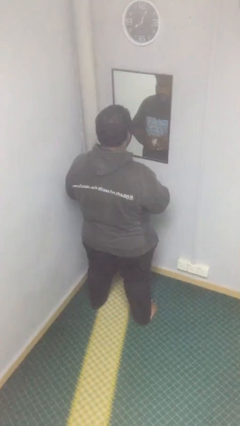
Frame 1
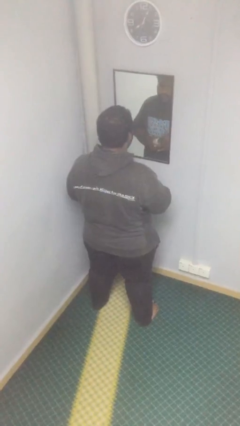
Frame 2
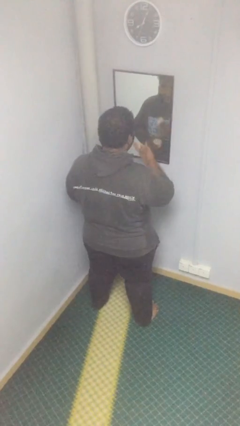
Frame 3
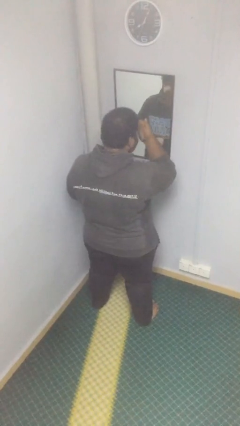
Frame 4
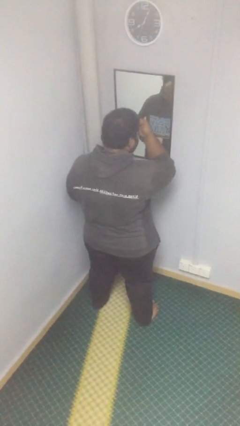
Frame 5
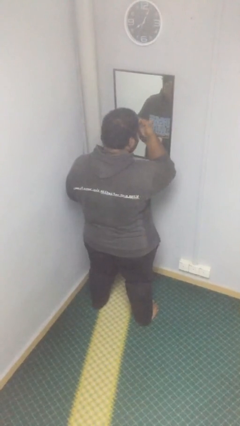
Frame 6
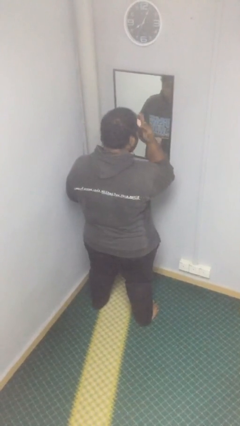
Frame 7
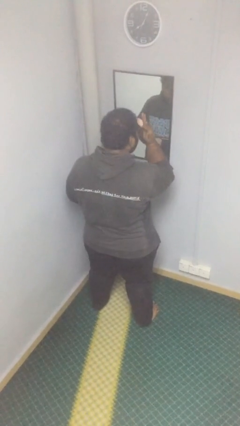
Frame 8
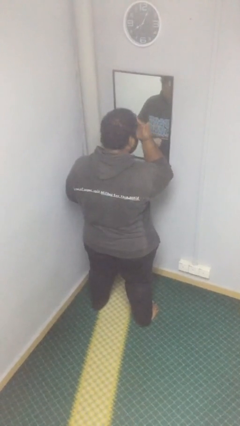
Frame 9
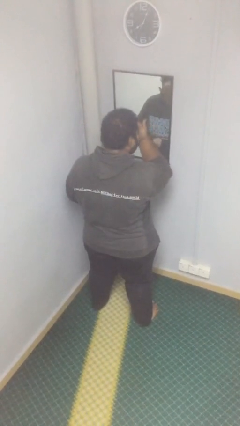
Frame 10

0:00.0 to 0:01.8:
person applies foundation makeup

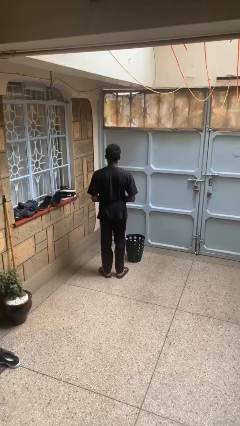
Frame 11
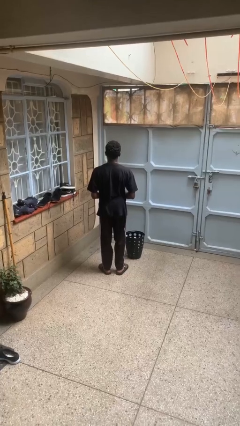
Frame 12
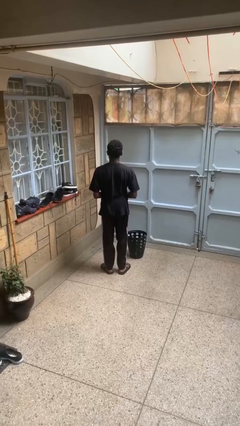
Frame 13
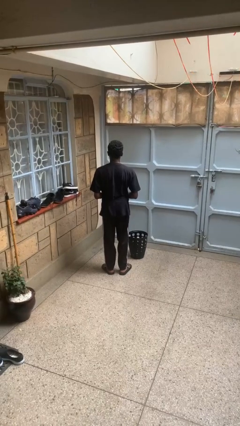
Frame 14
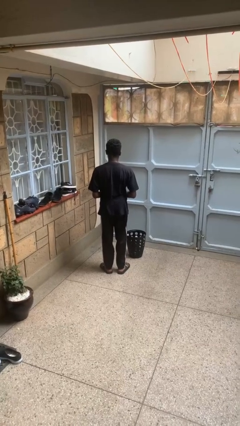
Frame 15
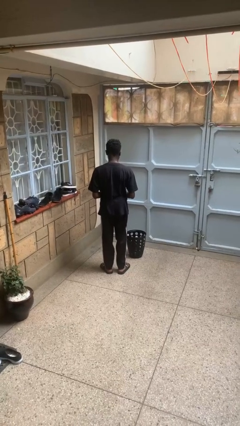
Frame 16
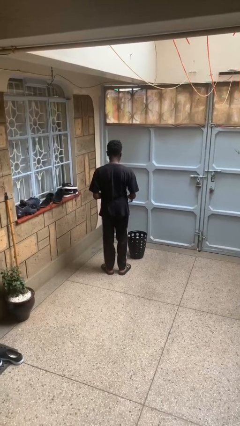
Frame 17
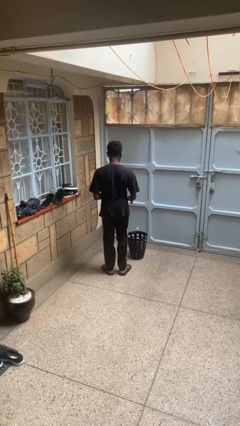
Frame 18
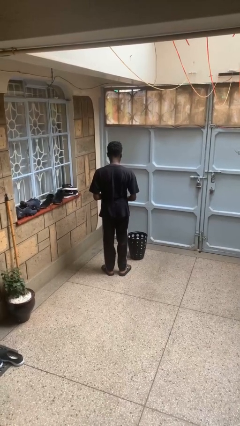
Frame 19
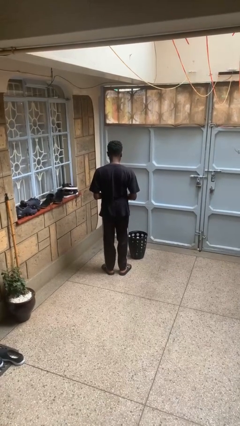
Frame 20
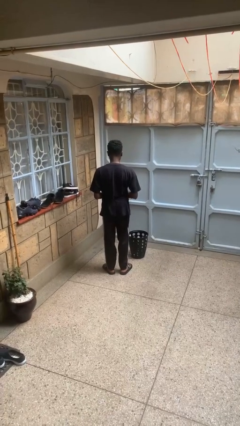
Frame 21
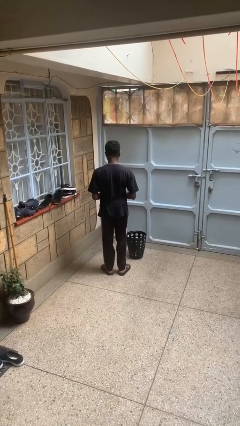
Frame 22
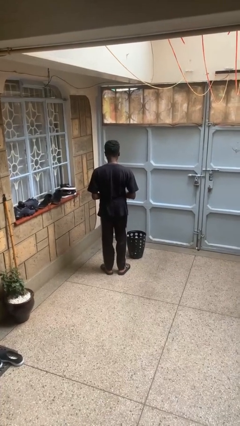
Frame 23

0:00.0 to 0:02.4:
person discards trash

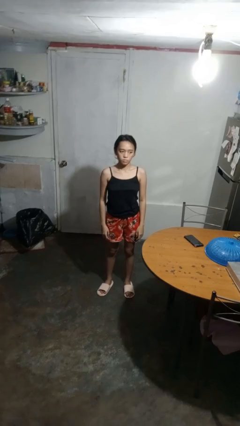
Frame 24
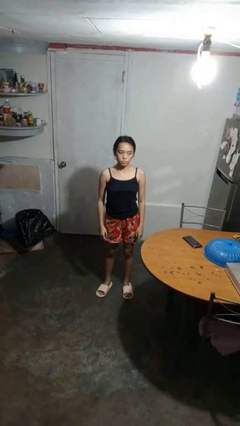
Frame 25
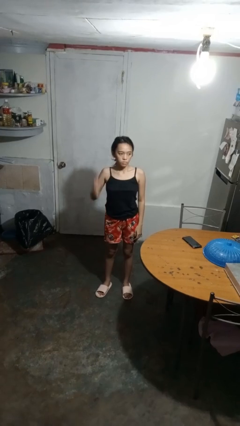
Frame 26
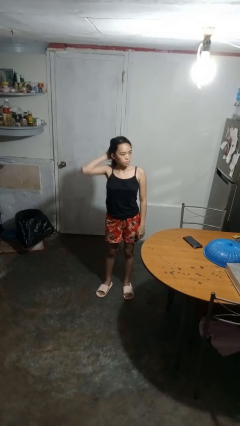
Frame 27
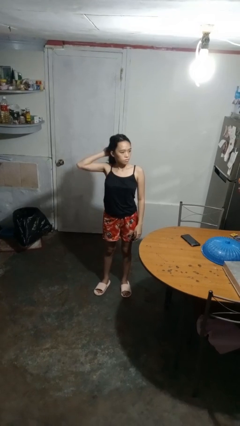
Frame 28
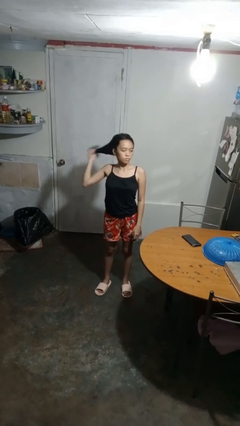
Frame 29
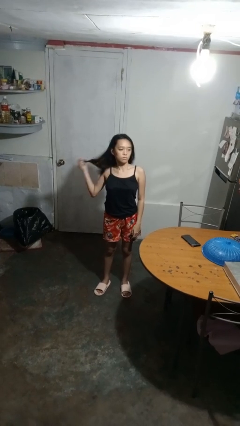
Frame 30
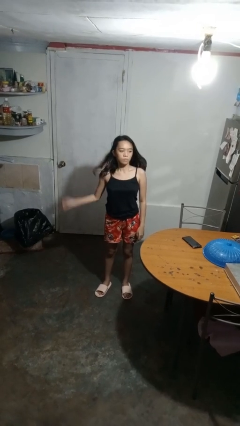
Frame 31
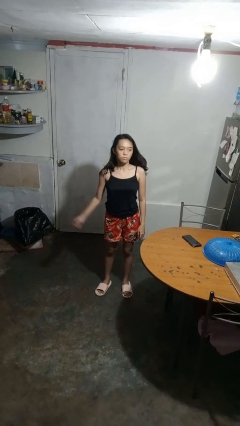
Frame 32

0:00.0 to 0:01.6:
person takes off hairtie

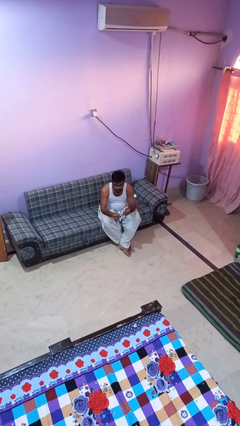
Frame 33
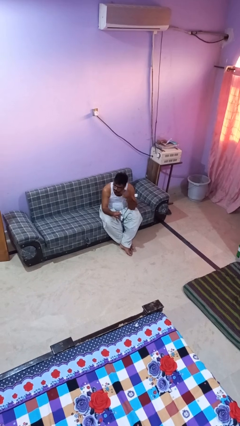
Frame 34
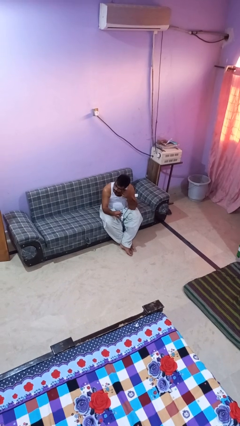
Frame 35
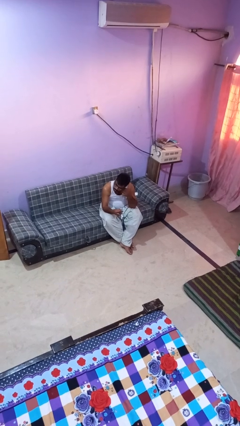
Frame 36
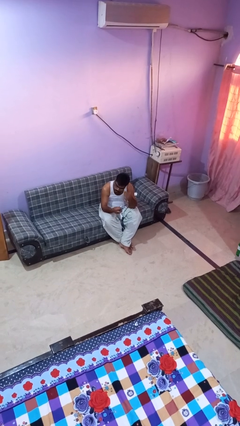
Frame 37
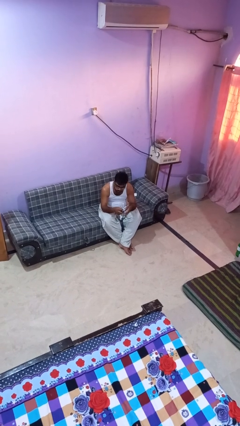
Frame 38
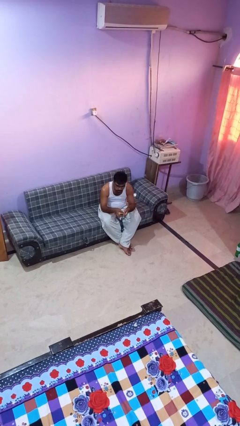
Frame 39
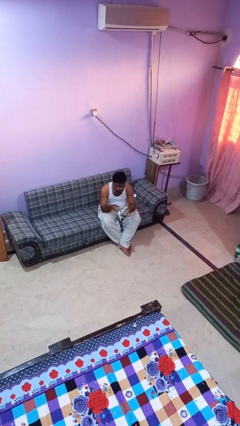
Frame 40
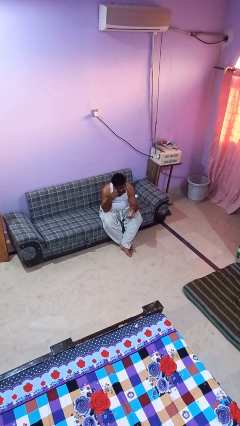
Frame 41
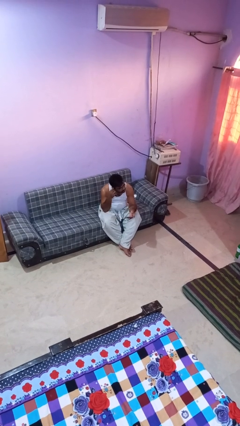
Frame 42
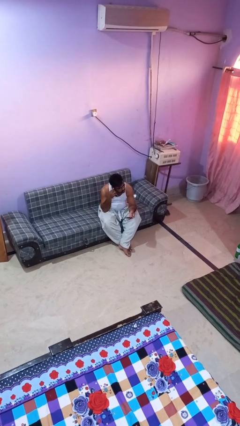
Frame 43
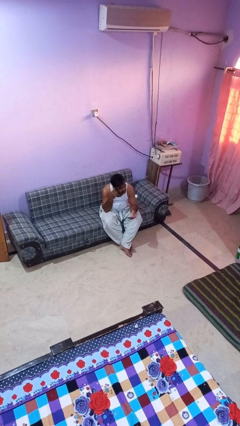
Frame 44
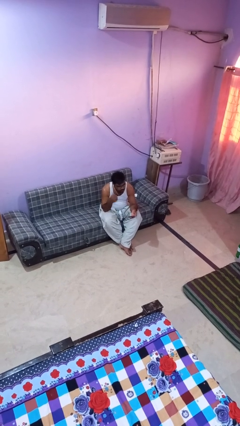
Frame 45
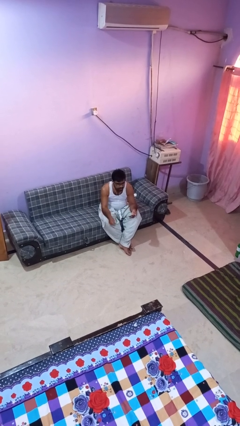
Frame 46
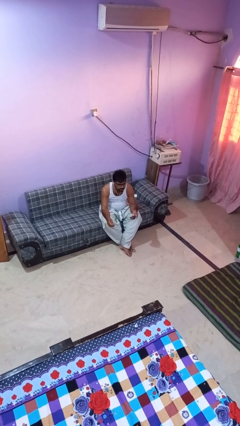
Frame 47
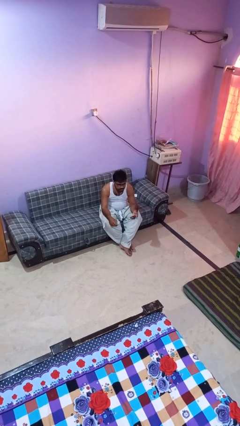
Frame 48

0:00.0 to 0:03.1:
person puts on headphones

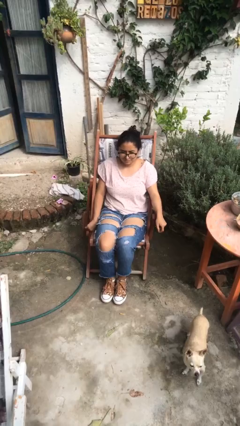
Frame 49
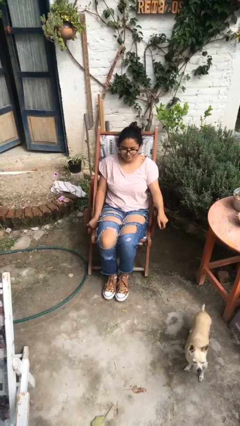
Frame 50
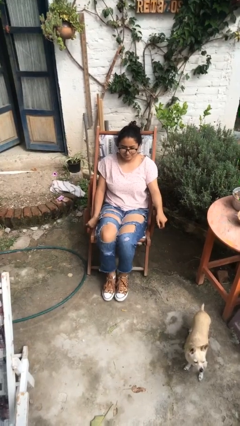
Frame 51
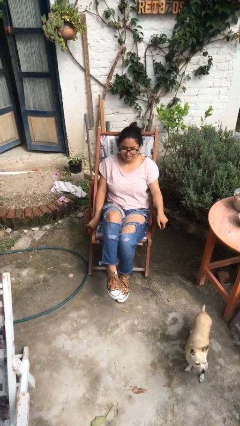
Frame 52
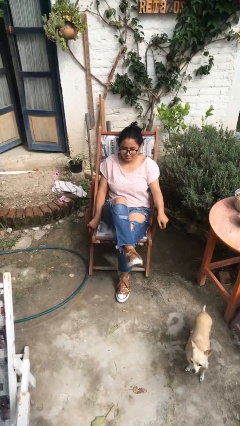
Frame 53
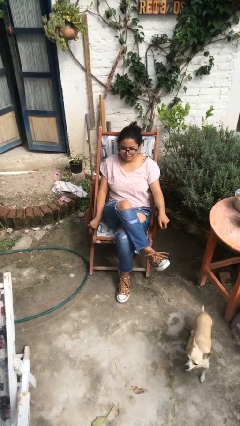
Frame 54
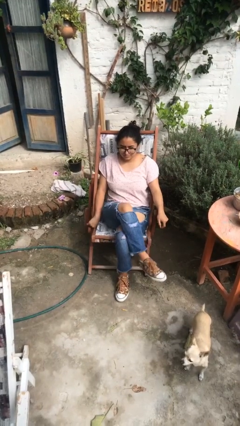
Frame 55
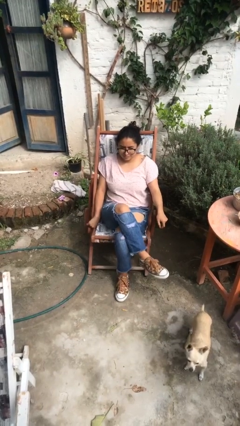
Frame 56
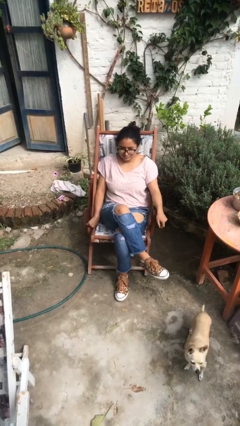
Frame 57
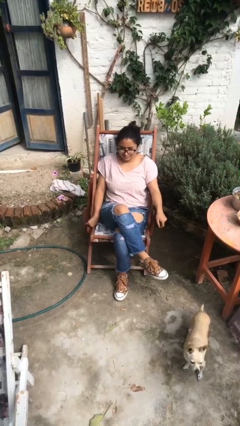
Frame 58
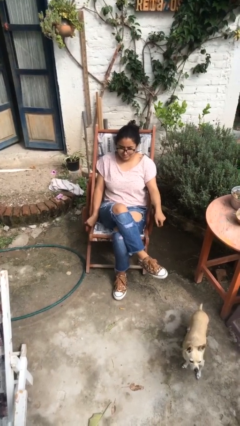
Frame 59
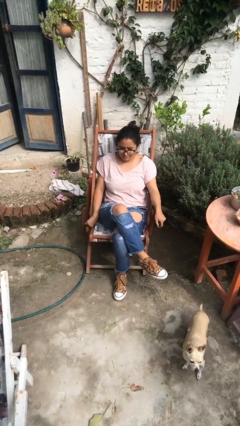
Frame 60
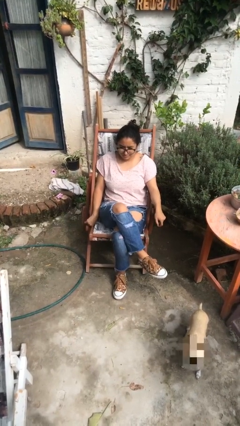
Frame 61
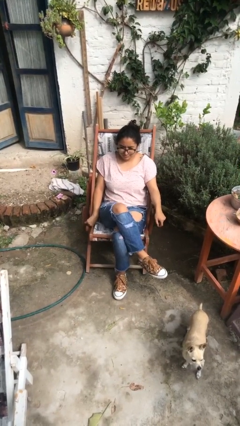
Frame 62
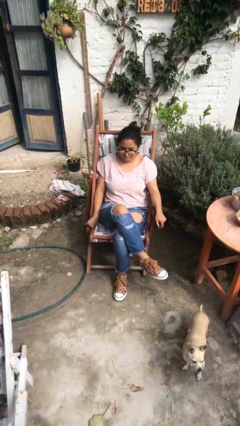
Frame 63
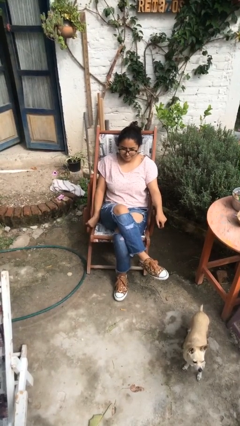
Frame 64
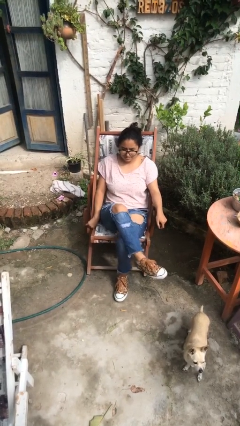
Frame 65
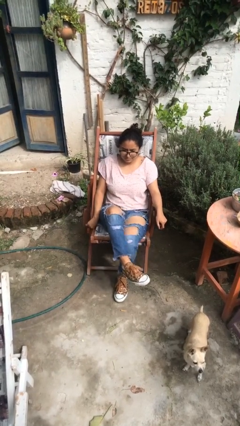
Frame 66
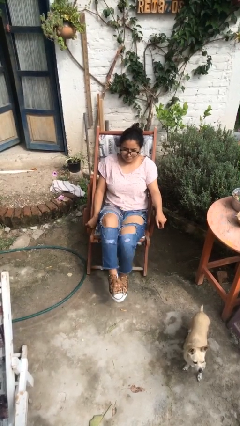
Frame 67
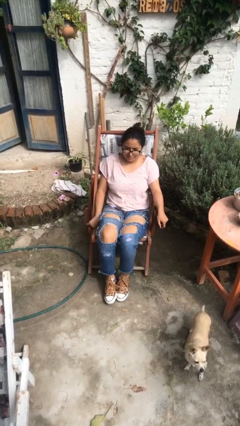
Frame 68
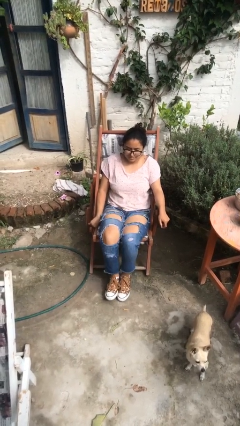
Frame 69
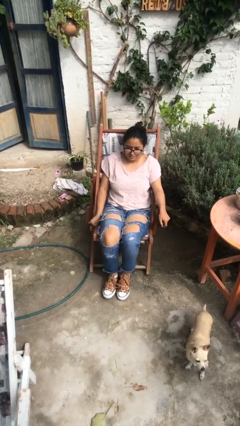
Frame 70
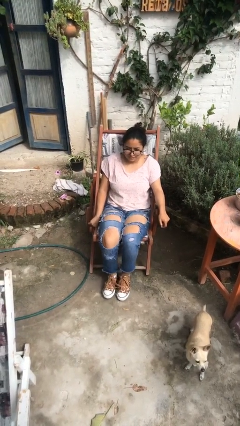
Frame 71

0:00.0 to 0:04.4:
person crosses legs

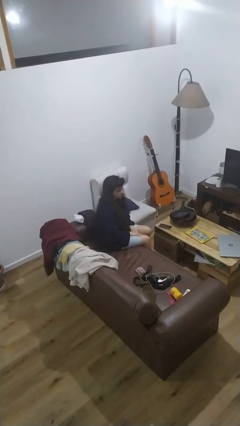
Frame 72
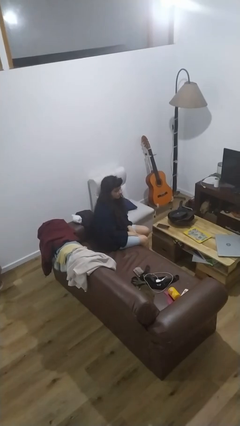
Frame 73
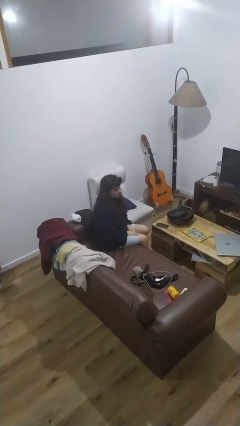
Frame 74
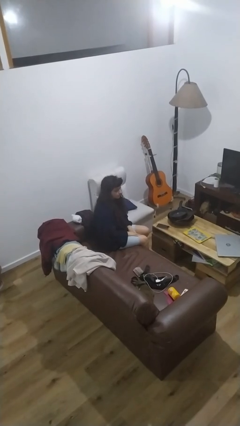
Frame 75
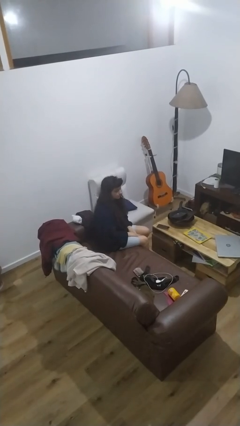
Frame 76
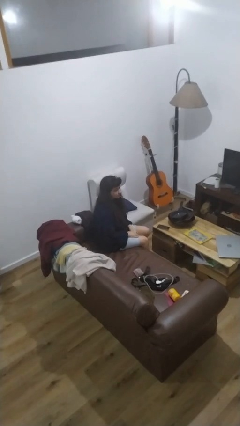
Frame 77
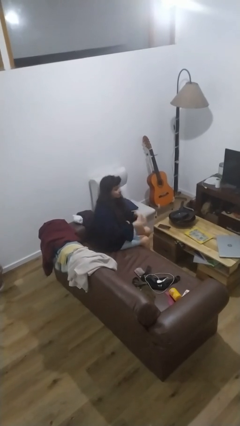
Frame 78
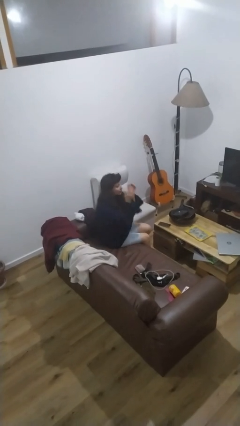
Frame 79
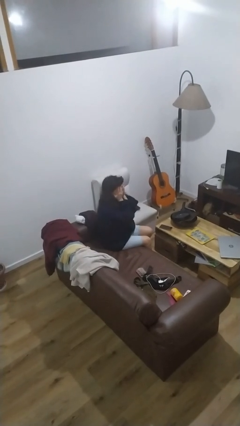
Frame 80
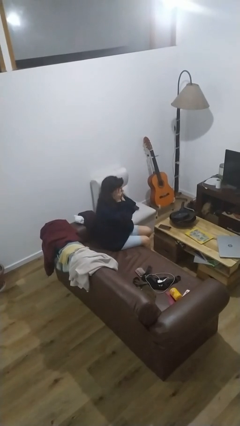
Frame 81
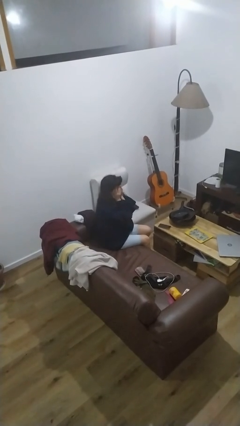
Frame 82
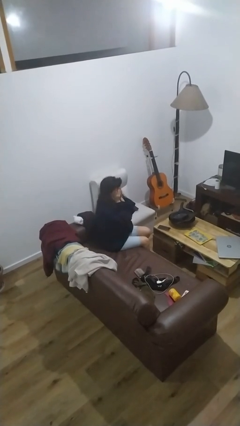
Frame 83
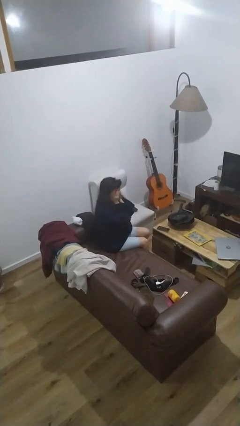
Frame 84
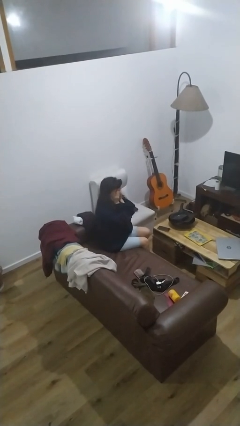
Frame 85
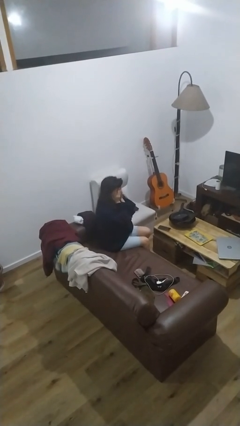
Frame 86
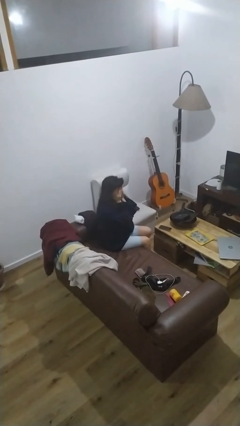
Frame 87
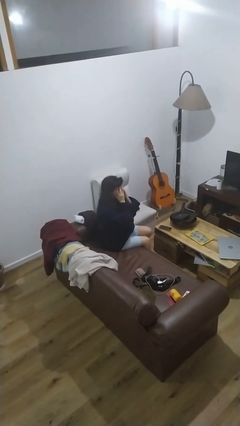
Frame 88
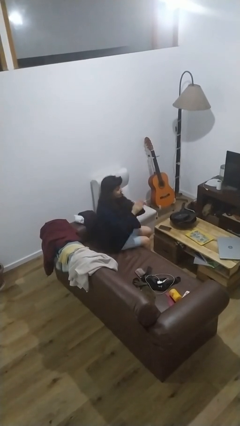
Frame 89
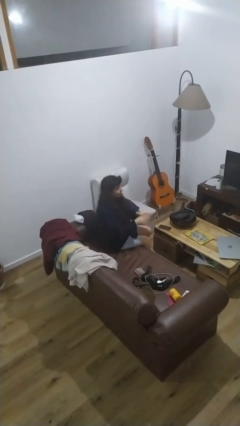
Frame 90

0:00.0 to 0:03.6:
person covers face with hands

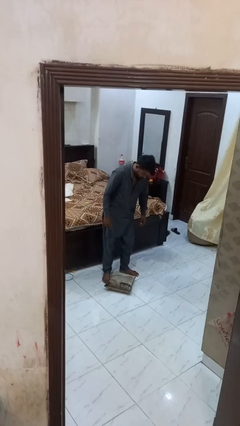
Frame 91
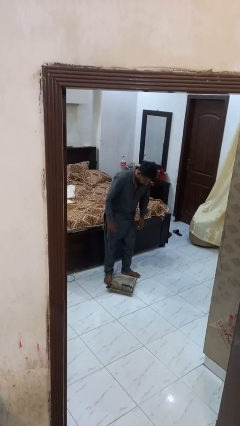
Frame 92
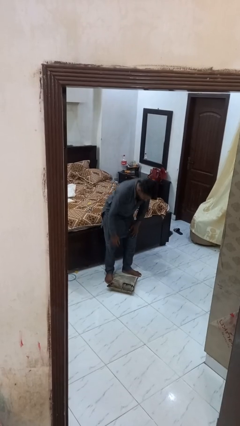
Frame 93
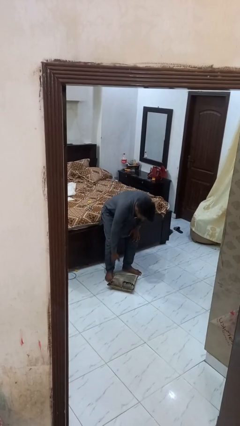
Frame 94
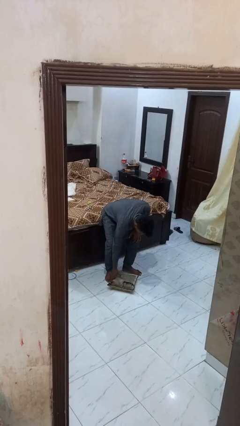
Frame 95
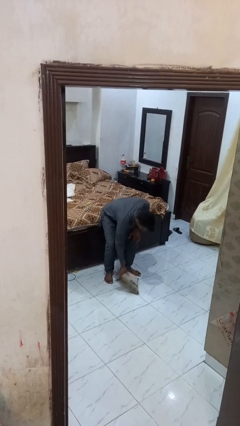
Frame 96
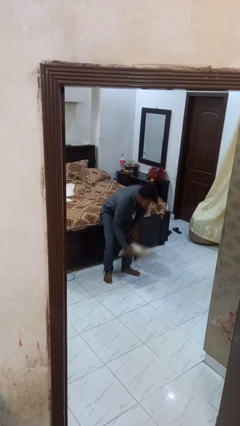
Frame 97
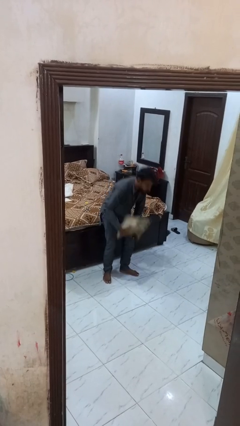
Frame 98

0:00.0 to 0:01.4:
person picks up object from floor
